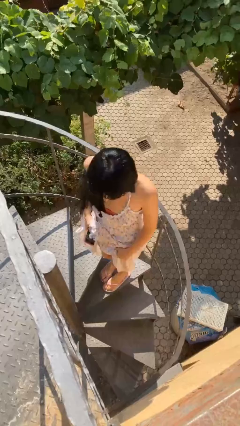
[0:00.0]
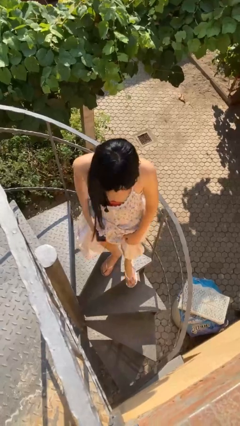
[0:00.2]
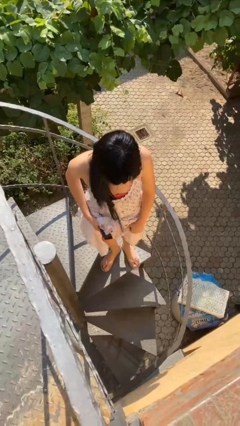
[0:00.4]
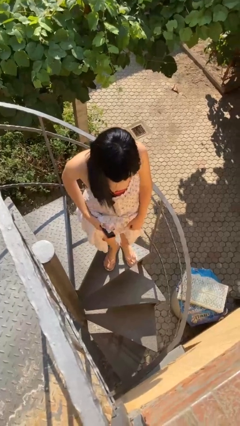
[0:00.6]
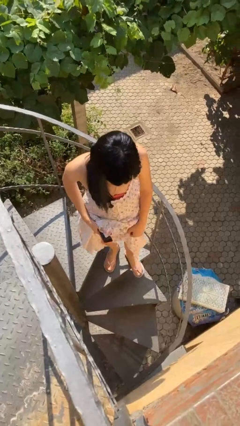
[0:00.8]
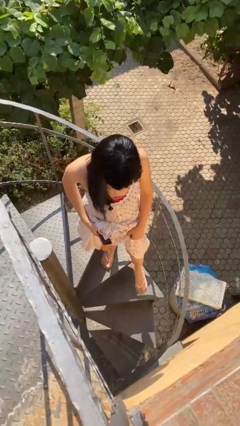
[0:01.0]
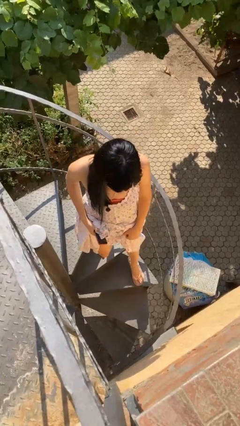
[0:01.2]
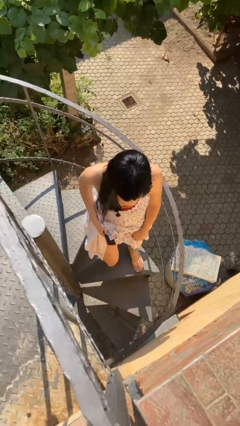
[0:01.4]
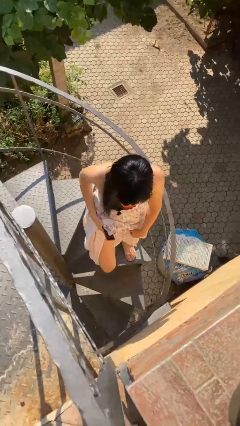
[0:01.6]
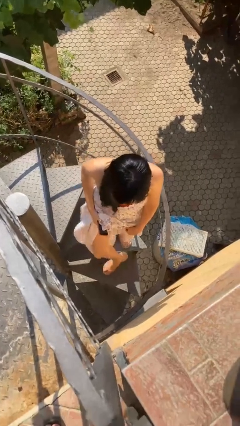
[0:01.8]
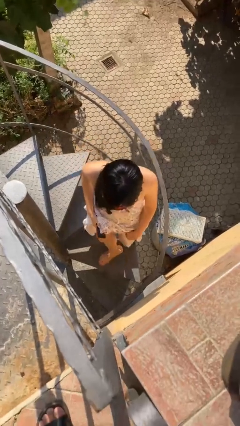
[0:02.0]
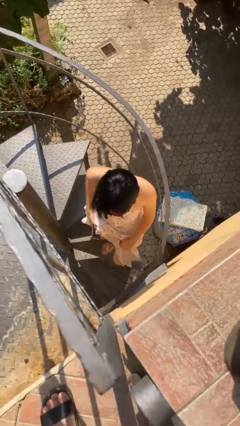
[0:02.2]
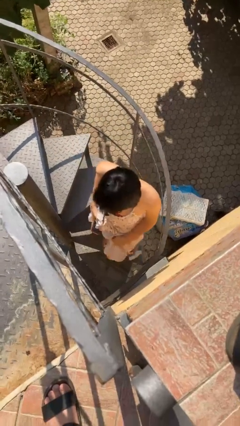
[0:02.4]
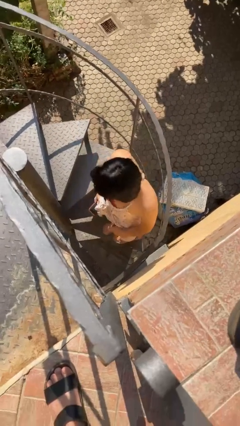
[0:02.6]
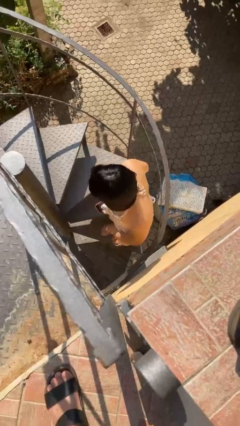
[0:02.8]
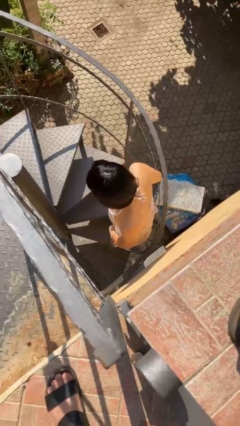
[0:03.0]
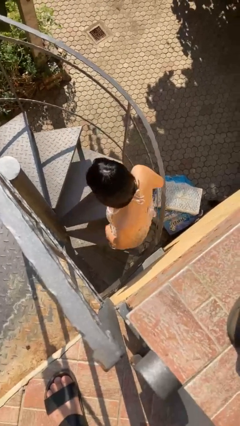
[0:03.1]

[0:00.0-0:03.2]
person climbs down stairs

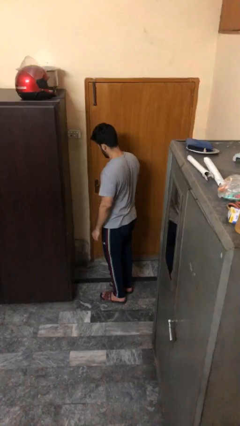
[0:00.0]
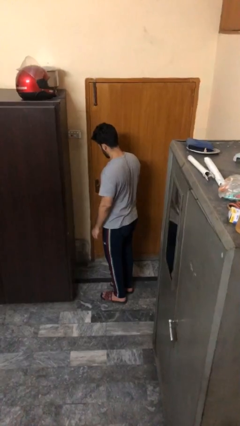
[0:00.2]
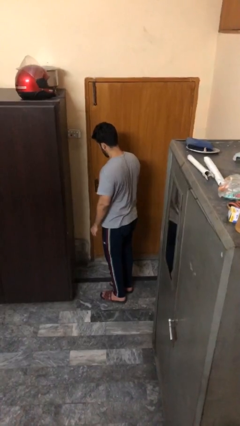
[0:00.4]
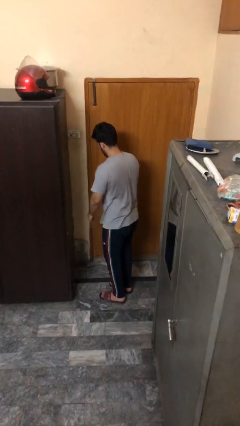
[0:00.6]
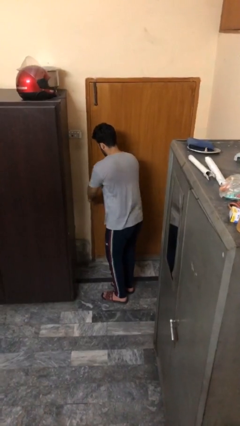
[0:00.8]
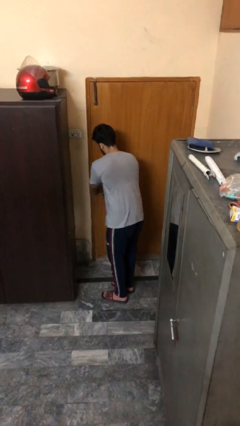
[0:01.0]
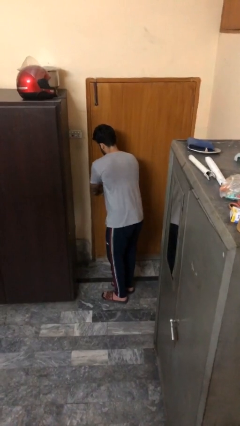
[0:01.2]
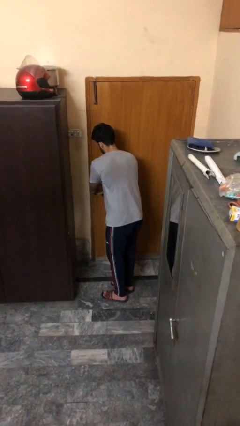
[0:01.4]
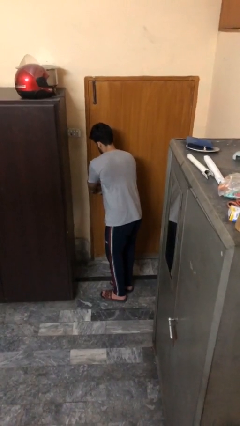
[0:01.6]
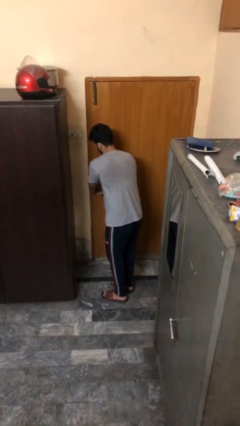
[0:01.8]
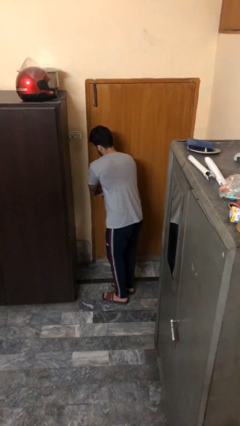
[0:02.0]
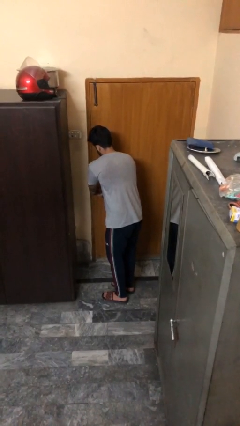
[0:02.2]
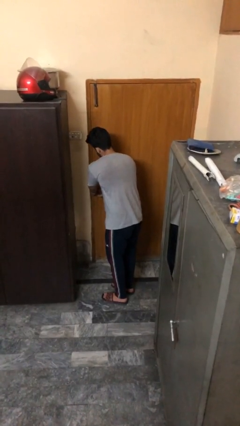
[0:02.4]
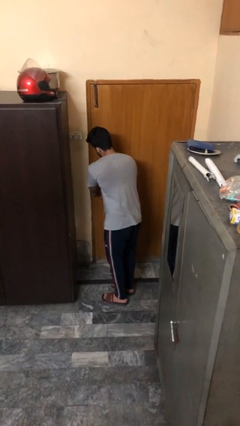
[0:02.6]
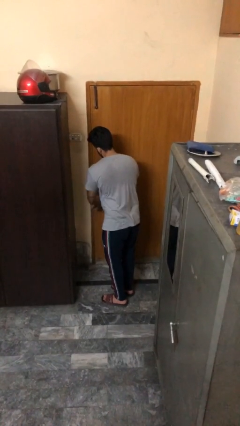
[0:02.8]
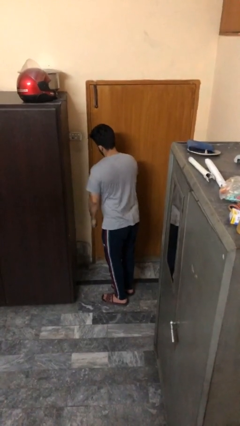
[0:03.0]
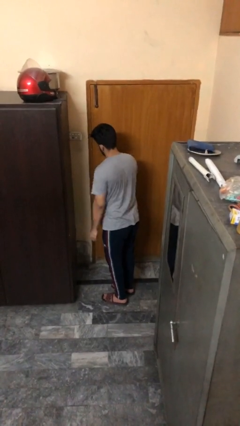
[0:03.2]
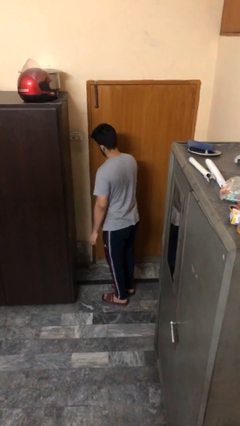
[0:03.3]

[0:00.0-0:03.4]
person unlocks door with keys

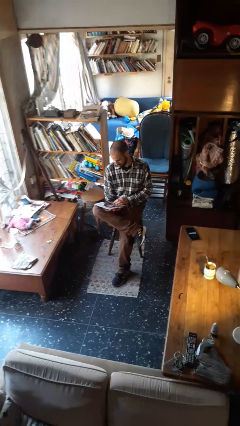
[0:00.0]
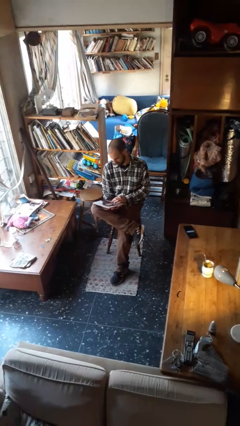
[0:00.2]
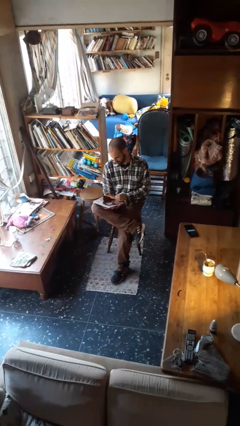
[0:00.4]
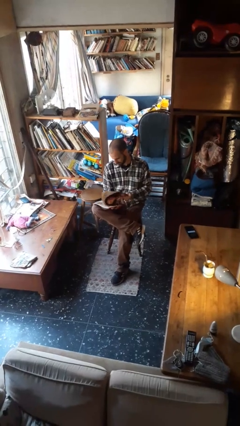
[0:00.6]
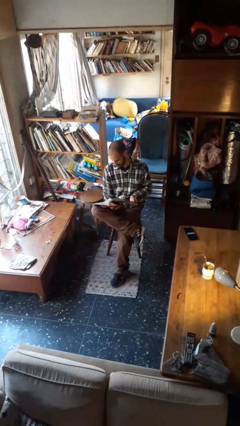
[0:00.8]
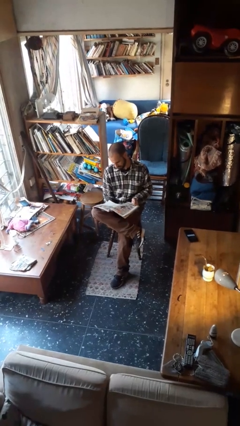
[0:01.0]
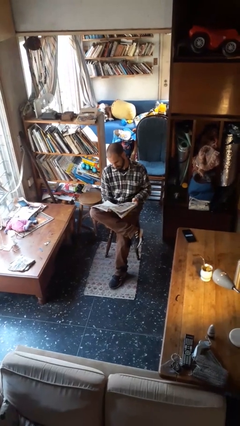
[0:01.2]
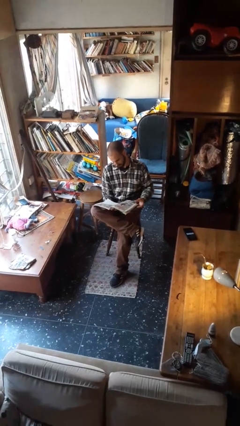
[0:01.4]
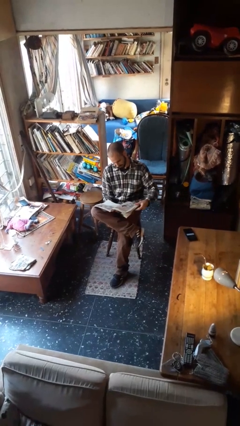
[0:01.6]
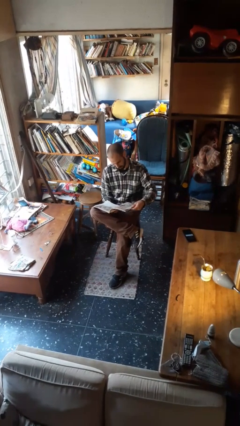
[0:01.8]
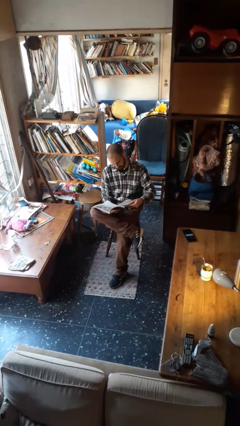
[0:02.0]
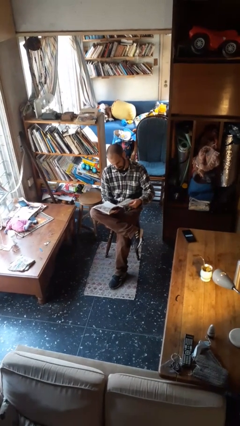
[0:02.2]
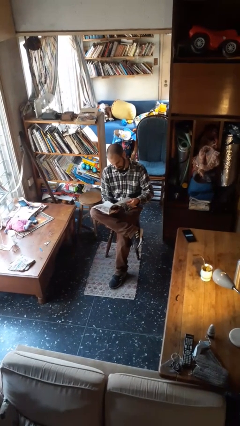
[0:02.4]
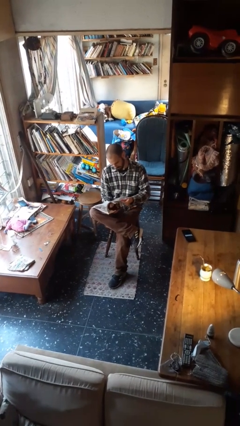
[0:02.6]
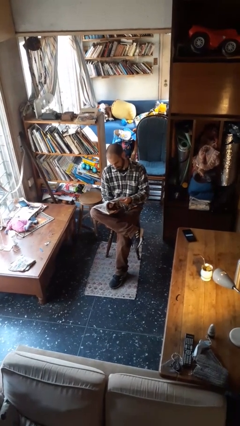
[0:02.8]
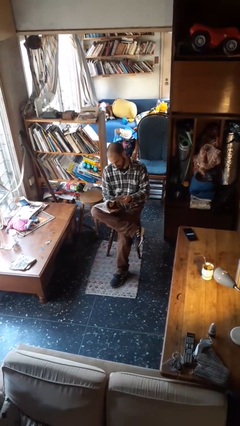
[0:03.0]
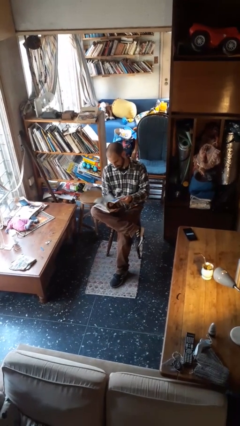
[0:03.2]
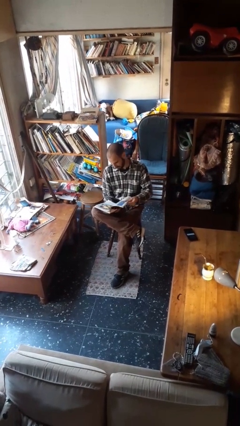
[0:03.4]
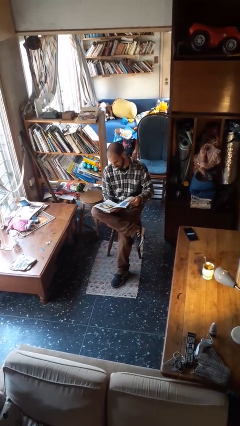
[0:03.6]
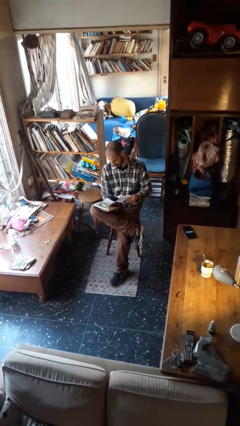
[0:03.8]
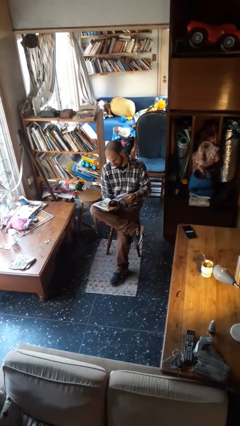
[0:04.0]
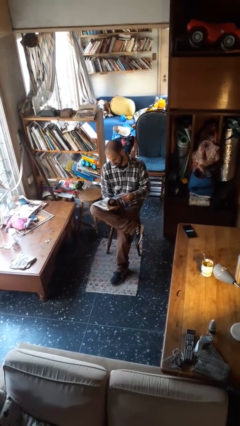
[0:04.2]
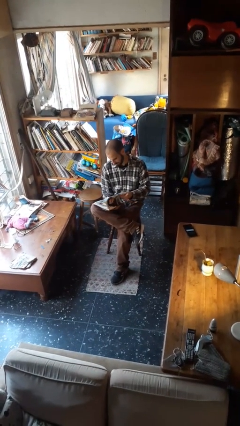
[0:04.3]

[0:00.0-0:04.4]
person reads magazine

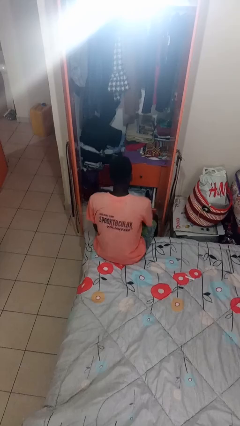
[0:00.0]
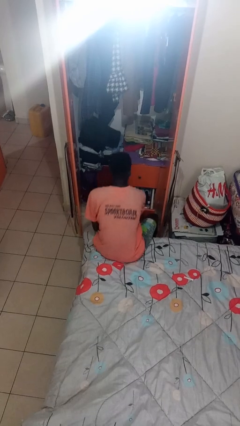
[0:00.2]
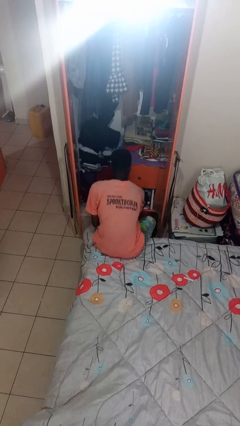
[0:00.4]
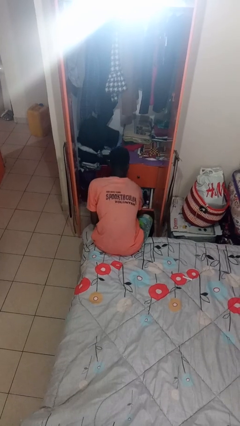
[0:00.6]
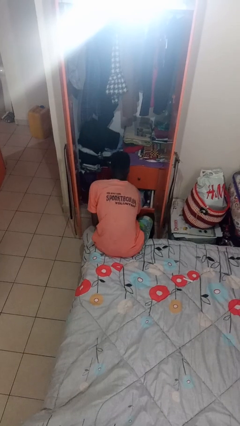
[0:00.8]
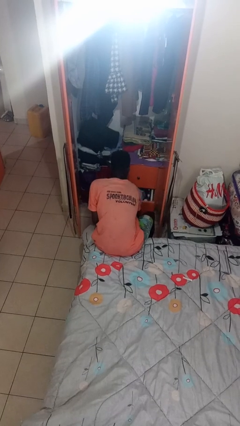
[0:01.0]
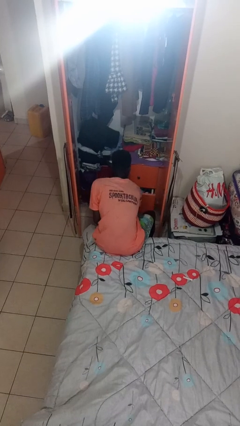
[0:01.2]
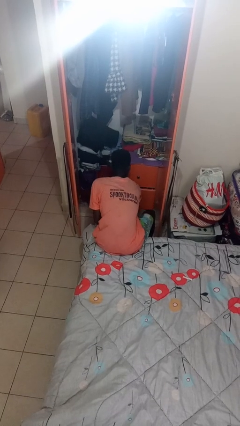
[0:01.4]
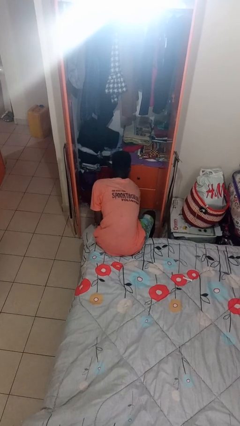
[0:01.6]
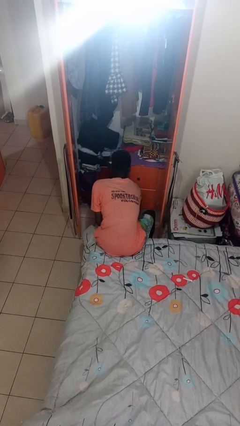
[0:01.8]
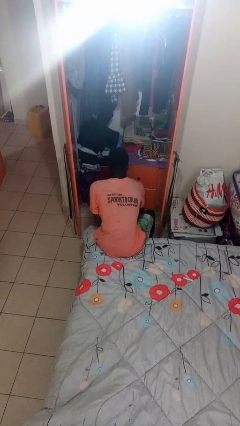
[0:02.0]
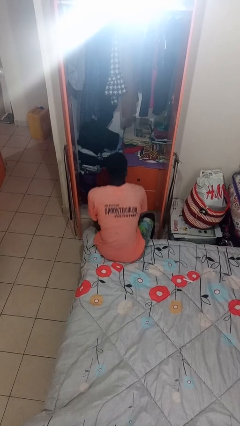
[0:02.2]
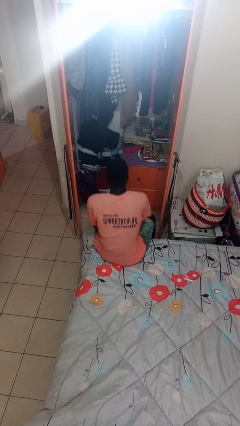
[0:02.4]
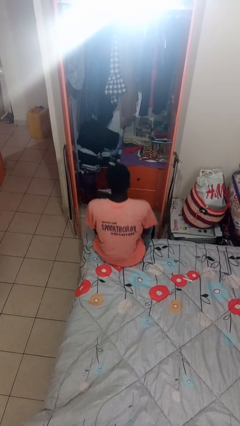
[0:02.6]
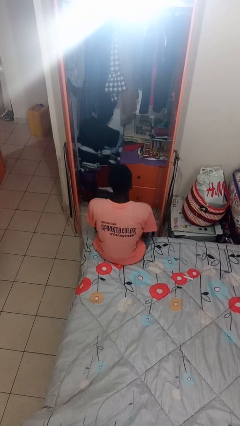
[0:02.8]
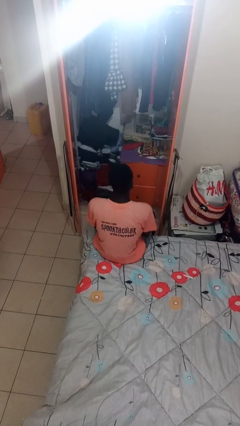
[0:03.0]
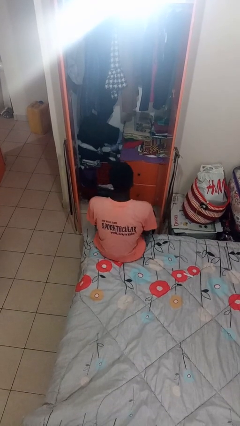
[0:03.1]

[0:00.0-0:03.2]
person closes dresser drawer

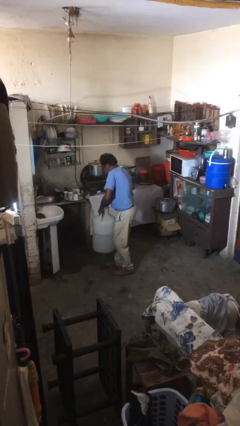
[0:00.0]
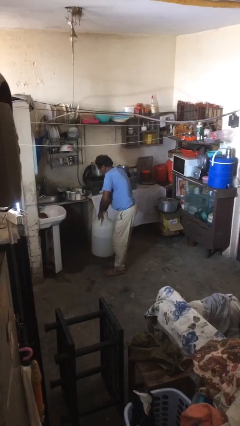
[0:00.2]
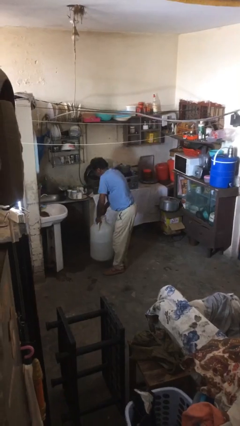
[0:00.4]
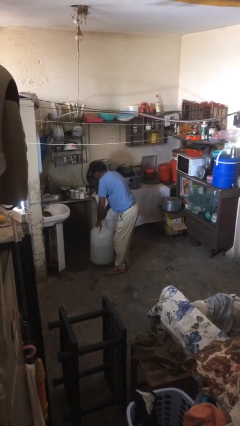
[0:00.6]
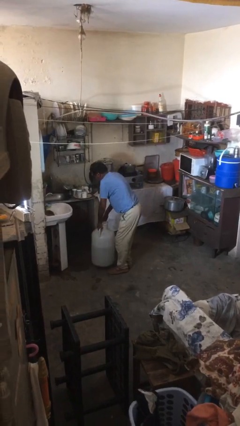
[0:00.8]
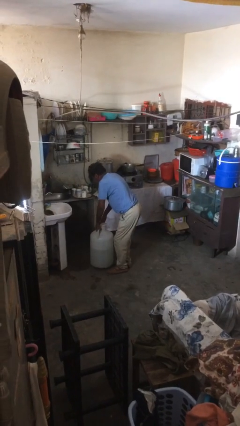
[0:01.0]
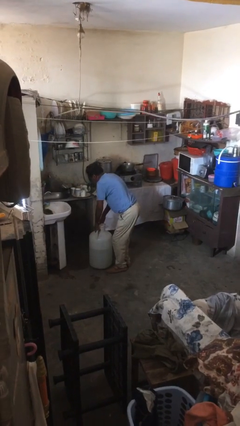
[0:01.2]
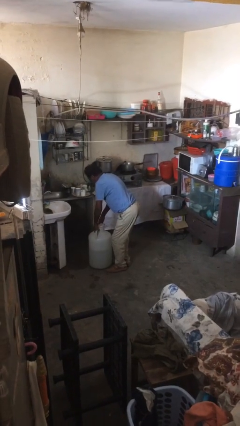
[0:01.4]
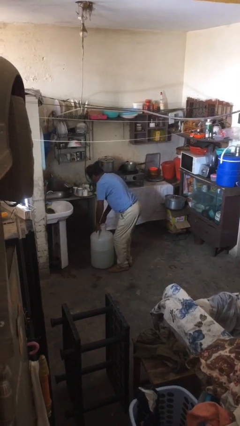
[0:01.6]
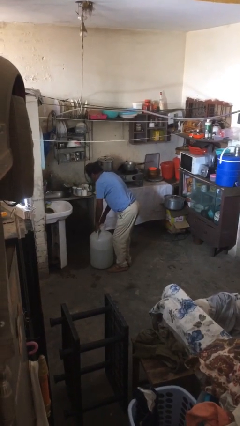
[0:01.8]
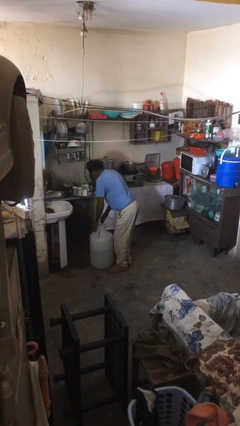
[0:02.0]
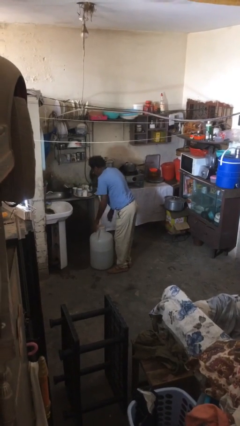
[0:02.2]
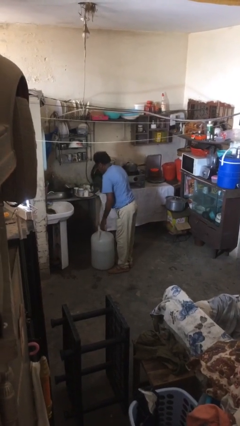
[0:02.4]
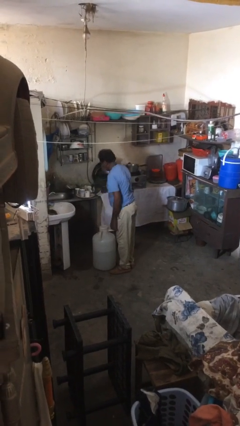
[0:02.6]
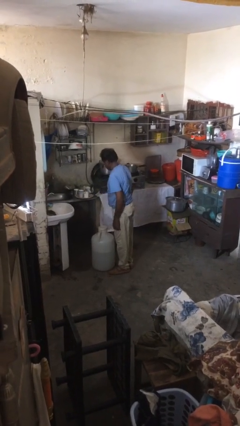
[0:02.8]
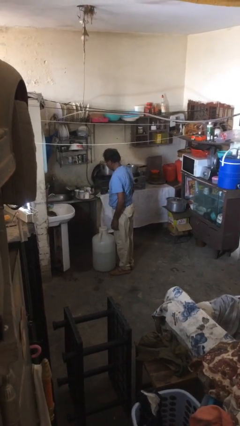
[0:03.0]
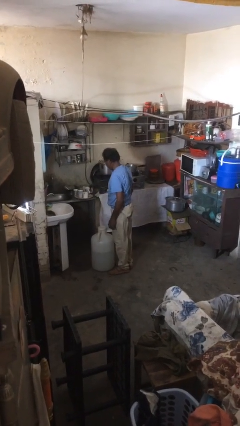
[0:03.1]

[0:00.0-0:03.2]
person puts down object on floor

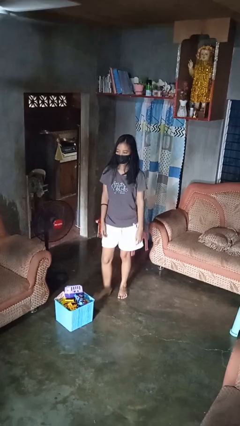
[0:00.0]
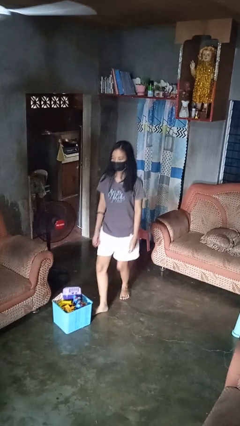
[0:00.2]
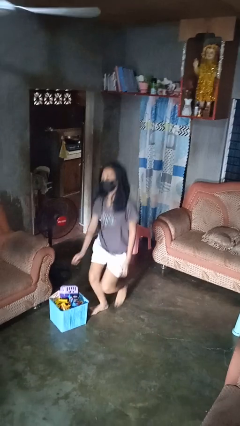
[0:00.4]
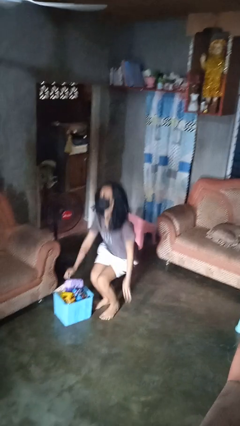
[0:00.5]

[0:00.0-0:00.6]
person trips on object on floor
